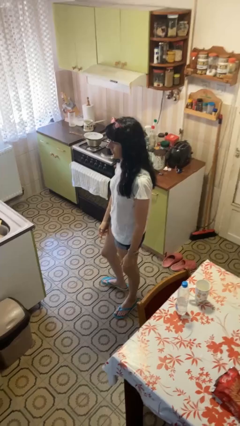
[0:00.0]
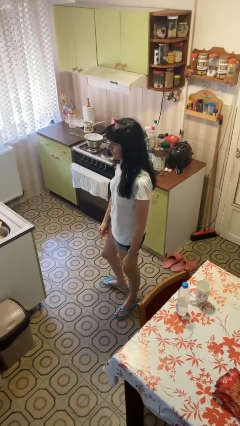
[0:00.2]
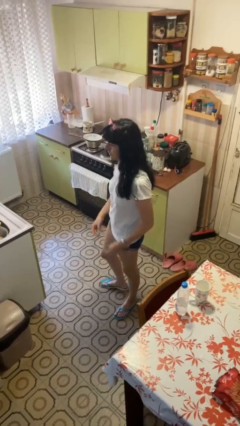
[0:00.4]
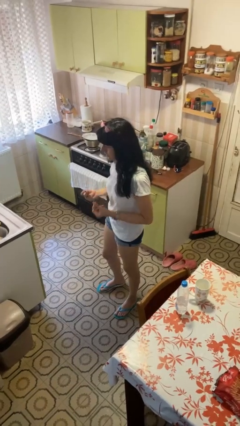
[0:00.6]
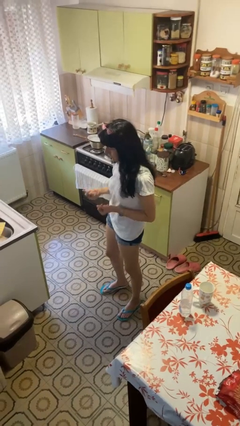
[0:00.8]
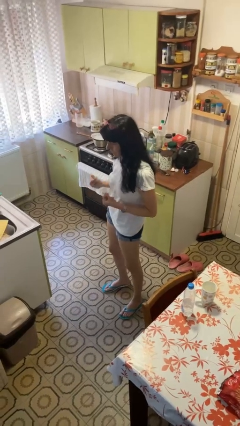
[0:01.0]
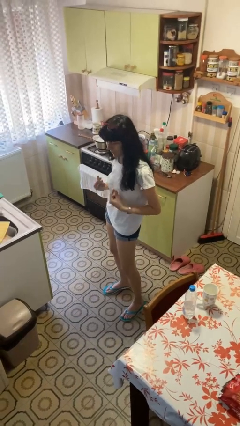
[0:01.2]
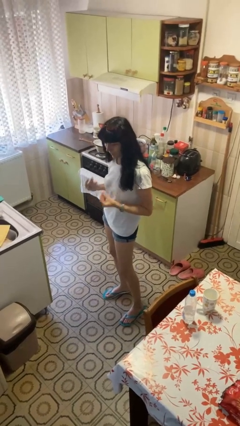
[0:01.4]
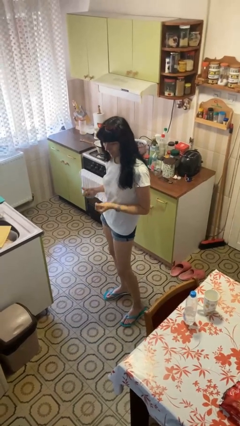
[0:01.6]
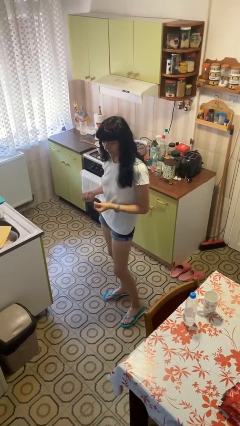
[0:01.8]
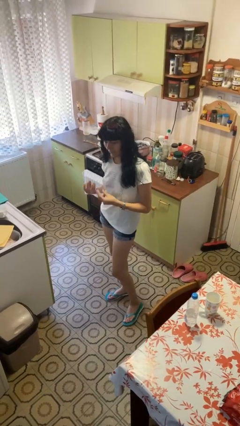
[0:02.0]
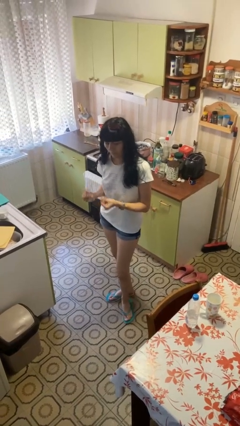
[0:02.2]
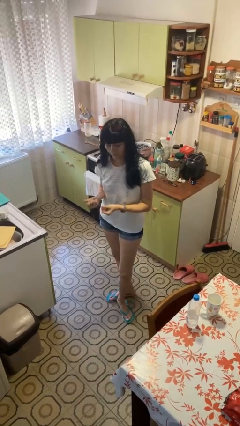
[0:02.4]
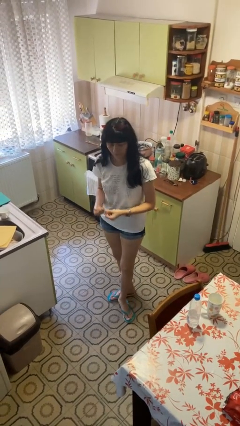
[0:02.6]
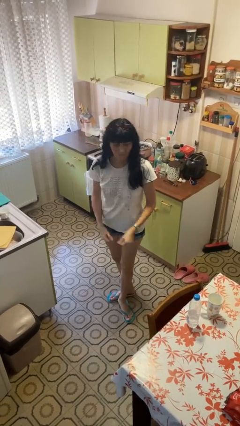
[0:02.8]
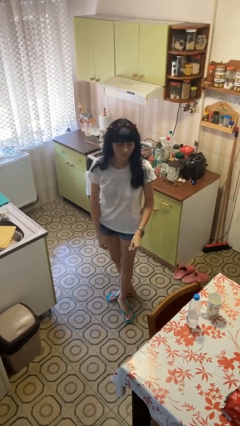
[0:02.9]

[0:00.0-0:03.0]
person snaps fingers

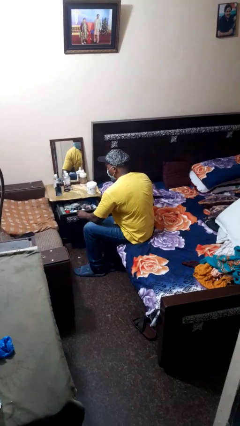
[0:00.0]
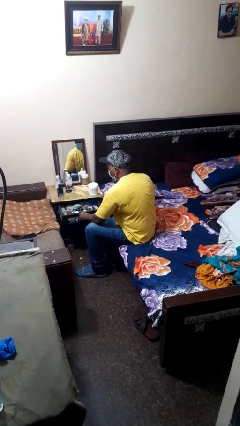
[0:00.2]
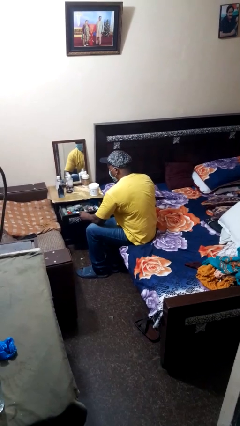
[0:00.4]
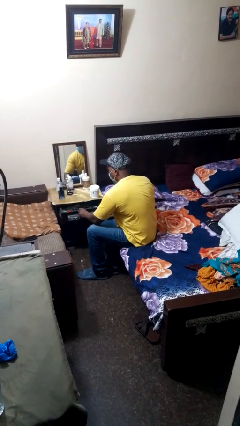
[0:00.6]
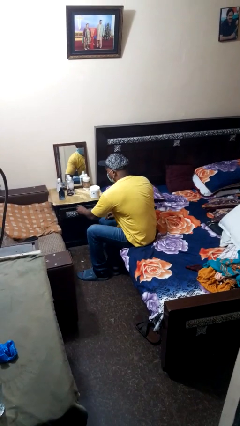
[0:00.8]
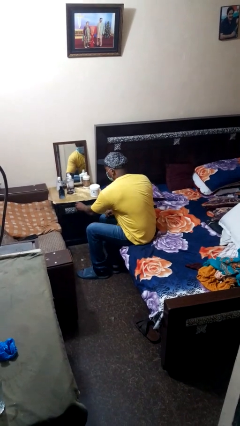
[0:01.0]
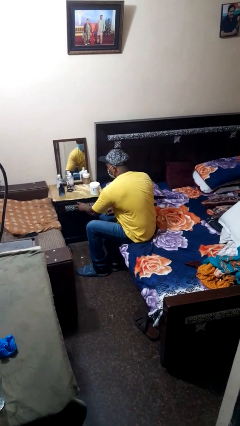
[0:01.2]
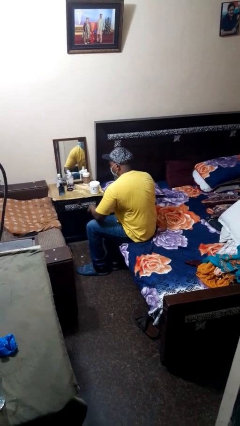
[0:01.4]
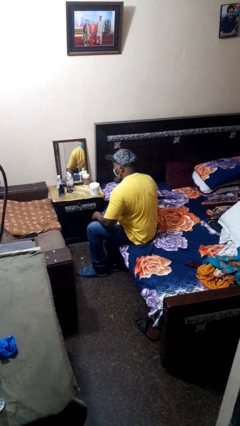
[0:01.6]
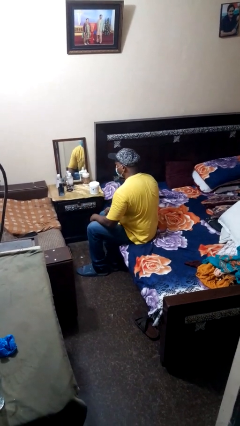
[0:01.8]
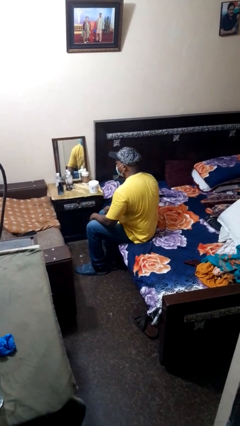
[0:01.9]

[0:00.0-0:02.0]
person closes dresser drawer

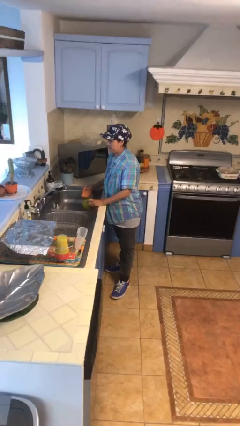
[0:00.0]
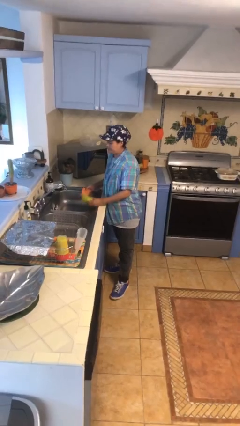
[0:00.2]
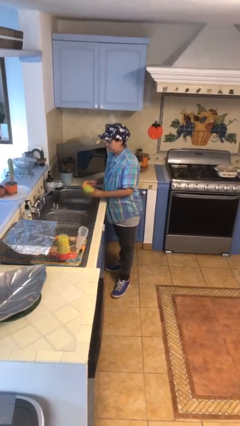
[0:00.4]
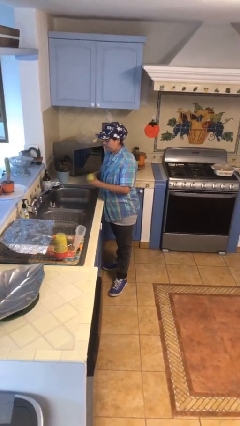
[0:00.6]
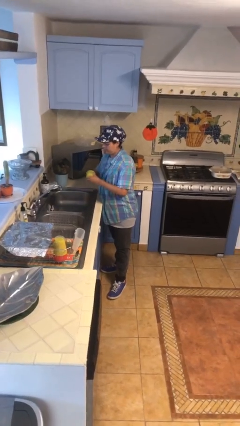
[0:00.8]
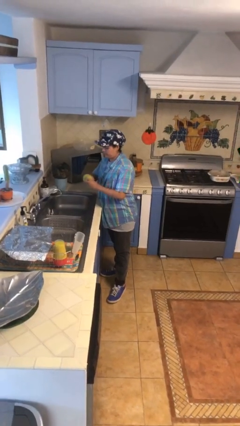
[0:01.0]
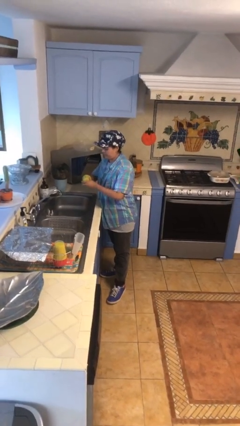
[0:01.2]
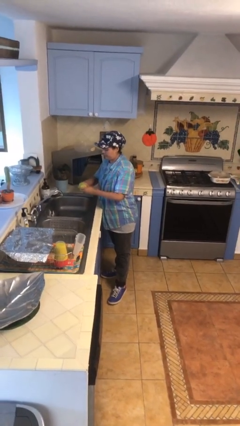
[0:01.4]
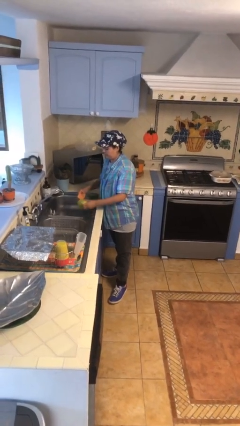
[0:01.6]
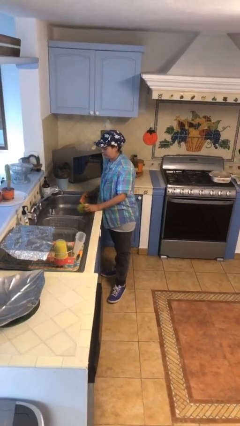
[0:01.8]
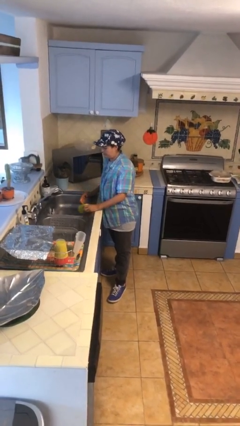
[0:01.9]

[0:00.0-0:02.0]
person washes dish

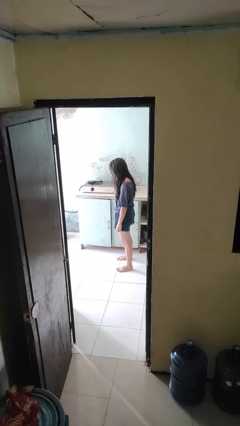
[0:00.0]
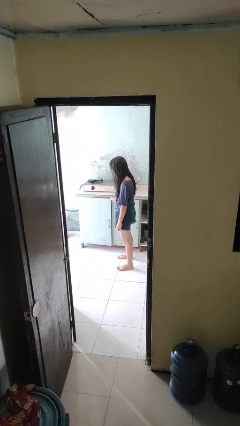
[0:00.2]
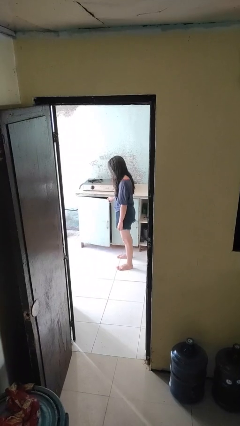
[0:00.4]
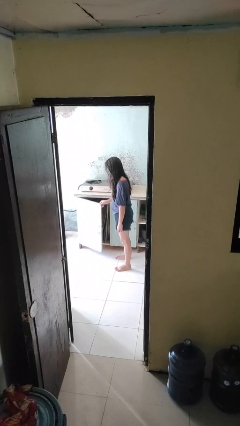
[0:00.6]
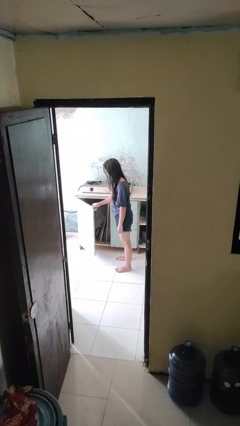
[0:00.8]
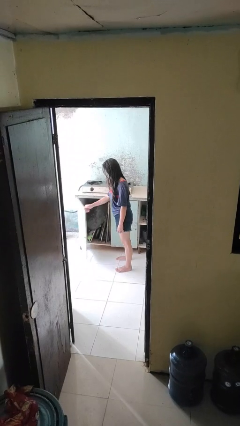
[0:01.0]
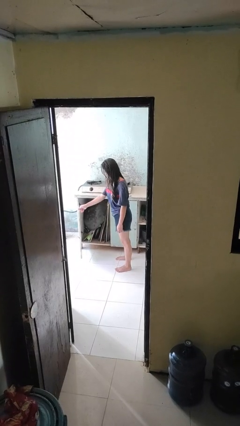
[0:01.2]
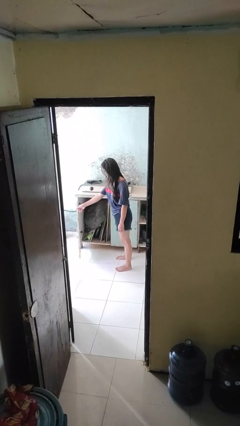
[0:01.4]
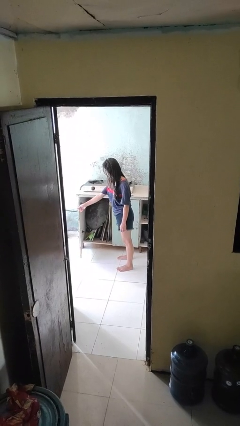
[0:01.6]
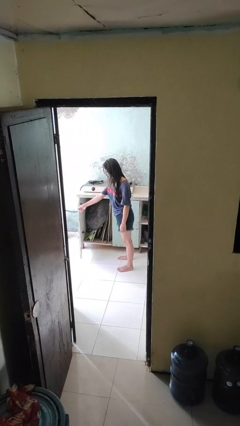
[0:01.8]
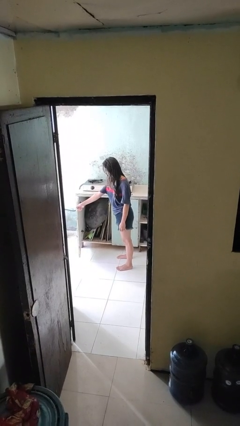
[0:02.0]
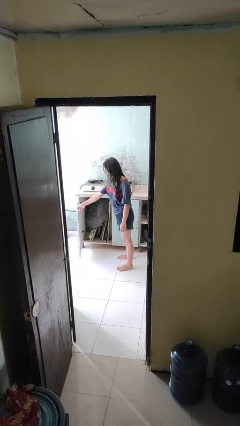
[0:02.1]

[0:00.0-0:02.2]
person opens cabinet

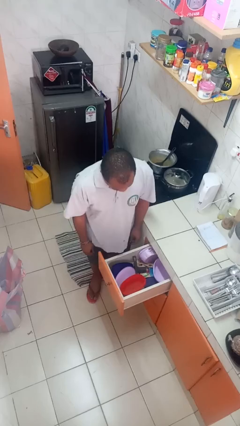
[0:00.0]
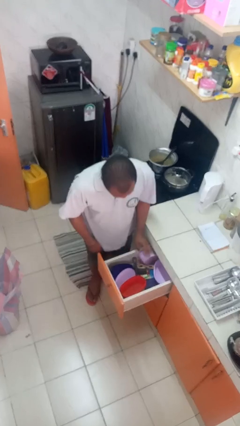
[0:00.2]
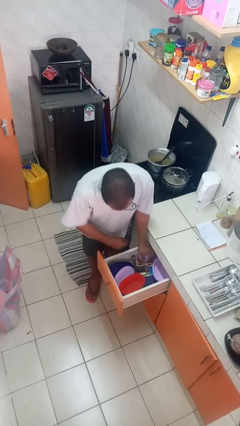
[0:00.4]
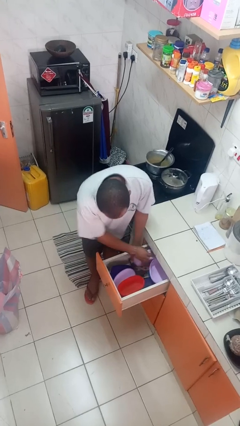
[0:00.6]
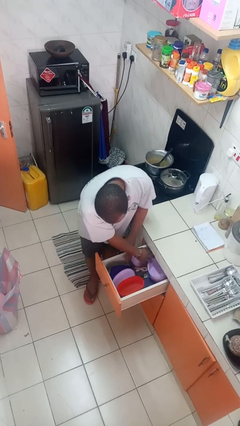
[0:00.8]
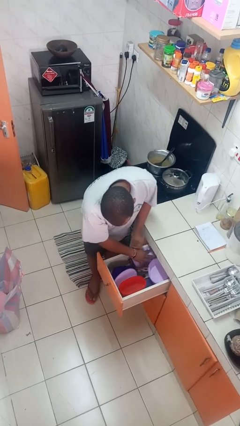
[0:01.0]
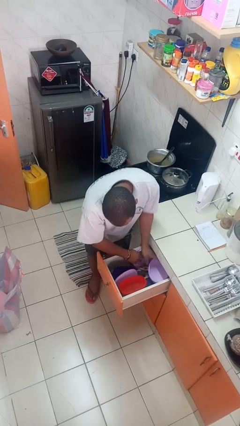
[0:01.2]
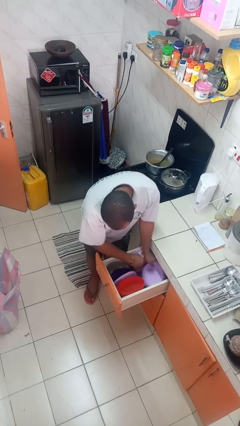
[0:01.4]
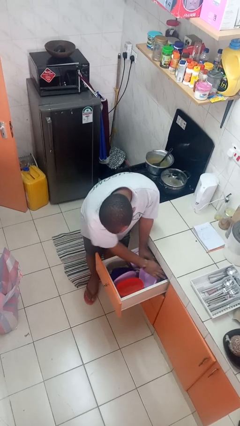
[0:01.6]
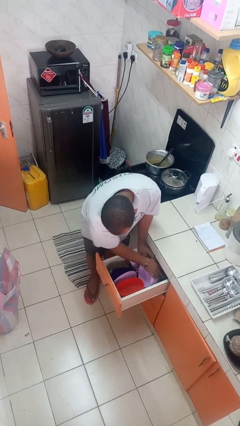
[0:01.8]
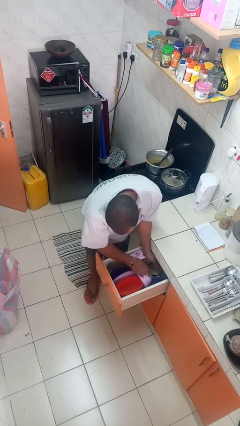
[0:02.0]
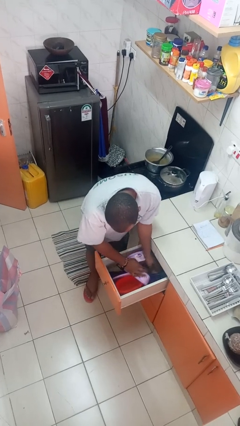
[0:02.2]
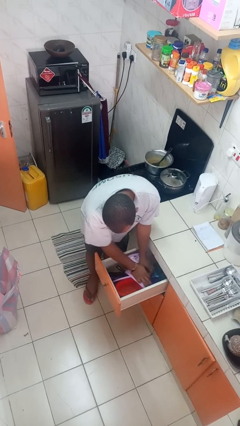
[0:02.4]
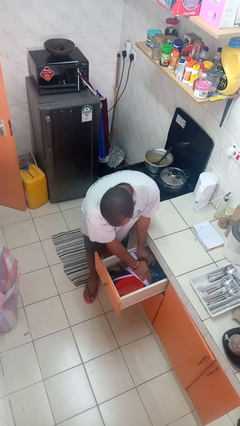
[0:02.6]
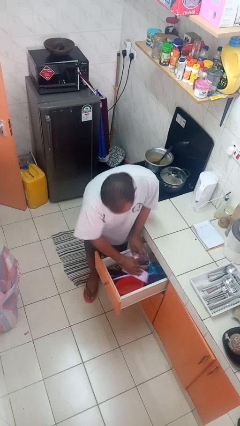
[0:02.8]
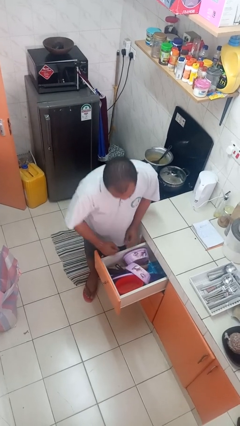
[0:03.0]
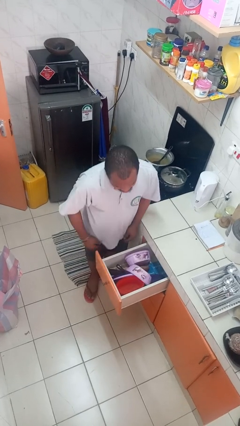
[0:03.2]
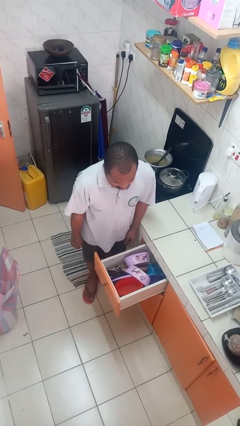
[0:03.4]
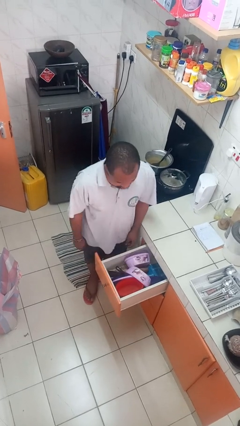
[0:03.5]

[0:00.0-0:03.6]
person searches in kitchen drawer

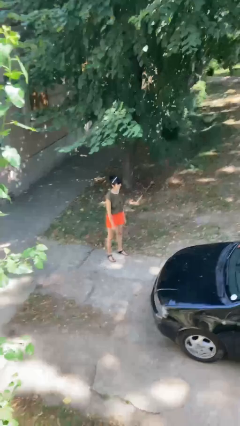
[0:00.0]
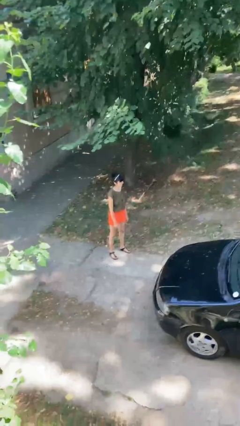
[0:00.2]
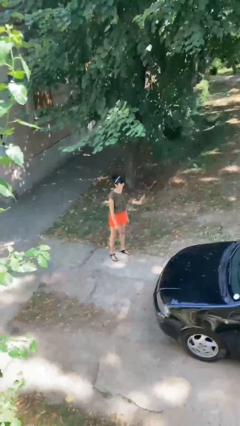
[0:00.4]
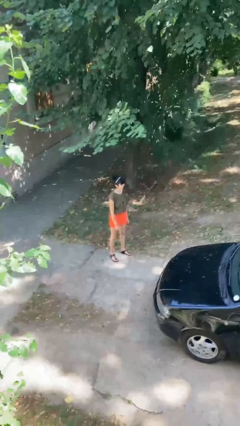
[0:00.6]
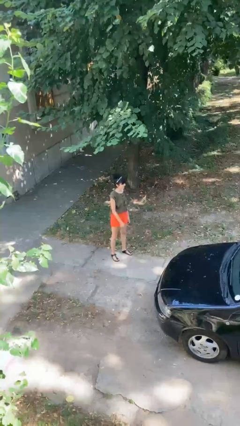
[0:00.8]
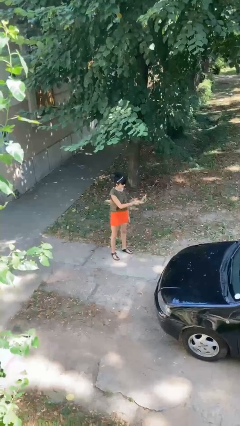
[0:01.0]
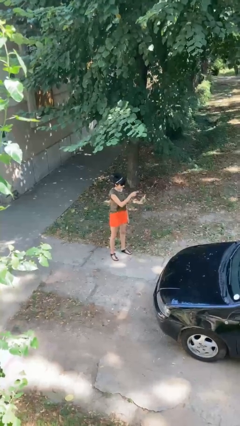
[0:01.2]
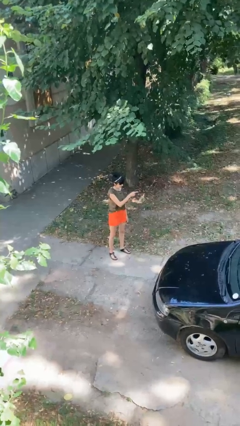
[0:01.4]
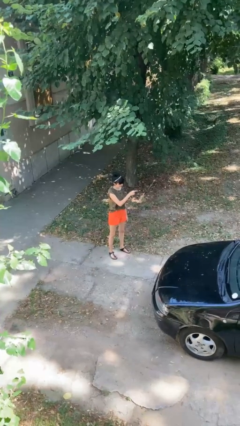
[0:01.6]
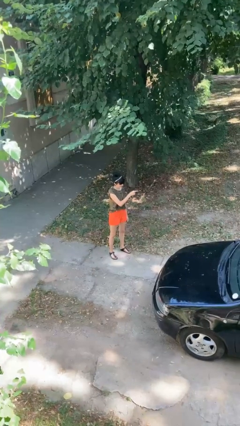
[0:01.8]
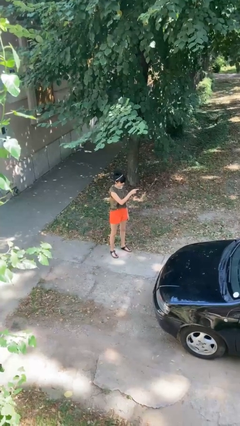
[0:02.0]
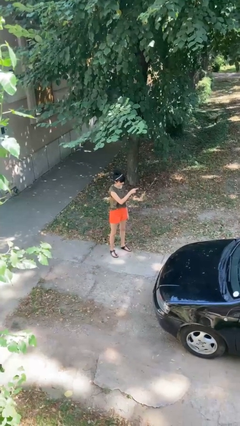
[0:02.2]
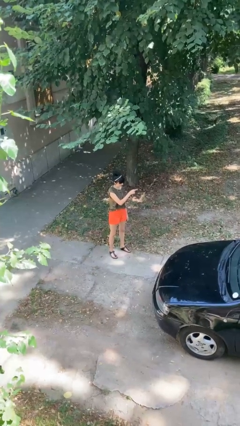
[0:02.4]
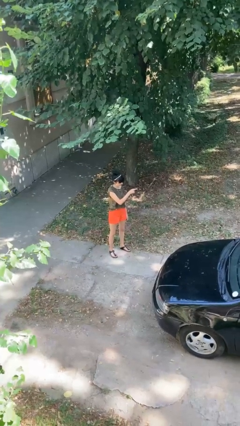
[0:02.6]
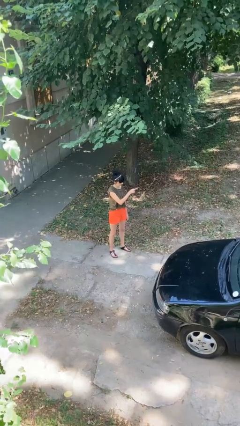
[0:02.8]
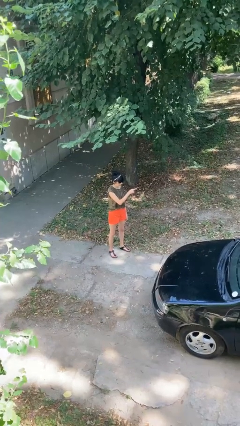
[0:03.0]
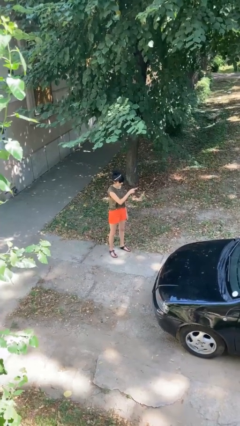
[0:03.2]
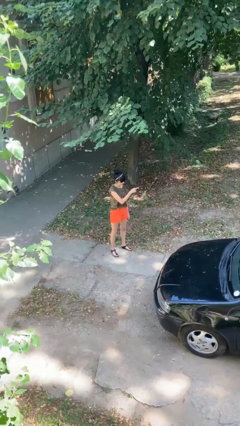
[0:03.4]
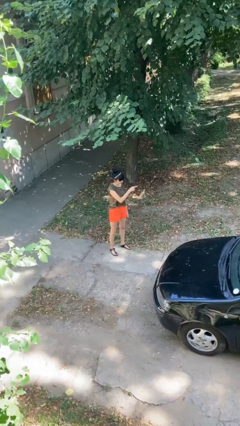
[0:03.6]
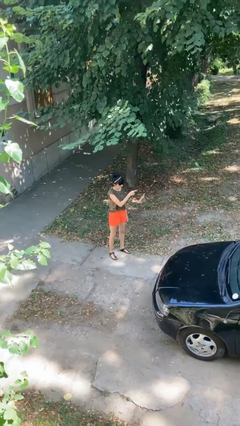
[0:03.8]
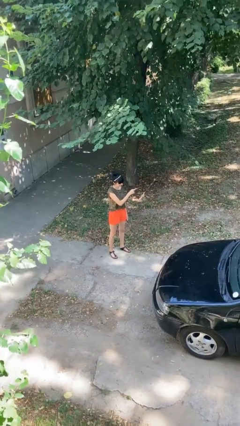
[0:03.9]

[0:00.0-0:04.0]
person points at person

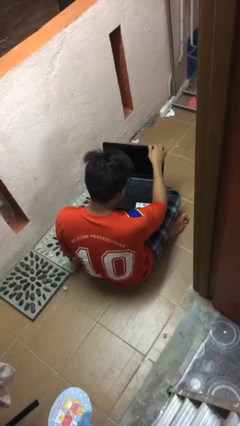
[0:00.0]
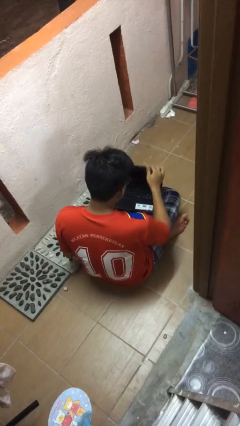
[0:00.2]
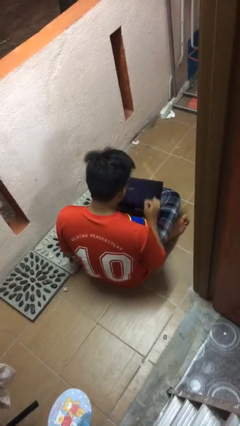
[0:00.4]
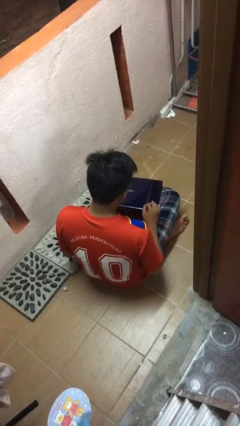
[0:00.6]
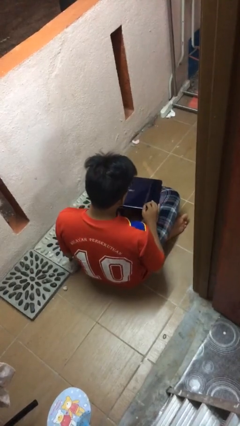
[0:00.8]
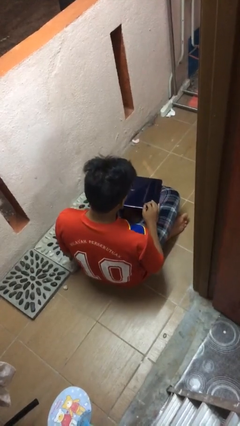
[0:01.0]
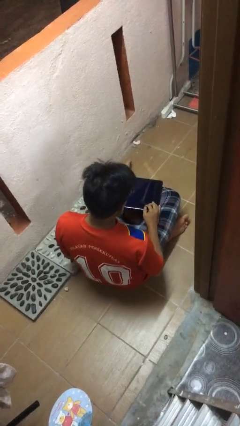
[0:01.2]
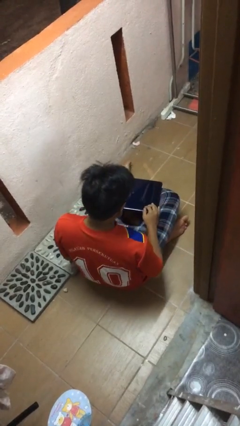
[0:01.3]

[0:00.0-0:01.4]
person closes laptop
